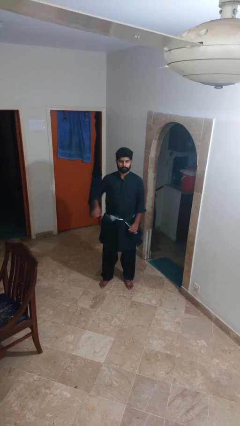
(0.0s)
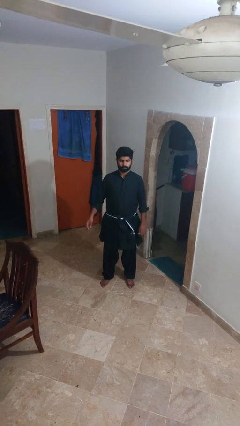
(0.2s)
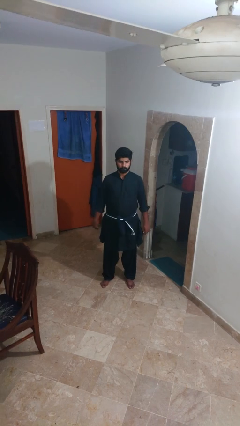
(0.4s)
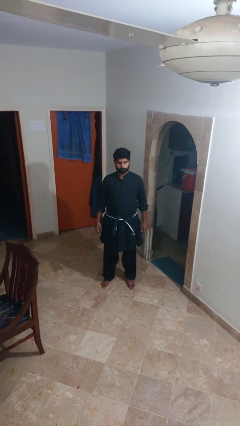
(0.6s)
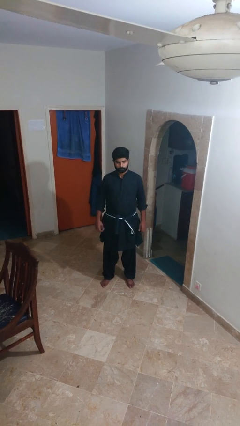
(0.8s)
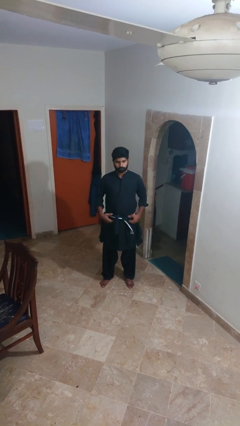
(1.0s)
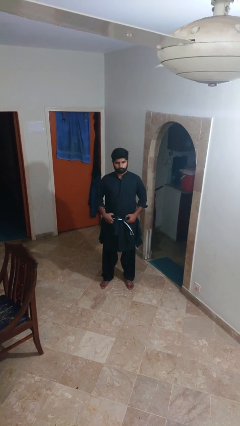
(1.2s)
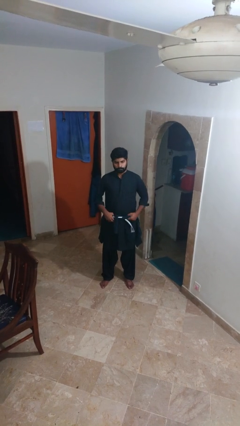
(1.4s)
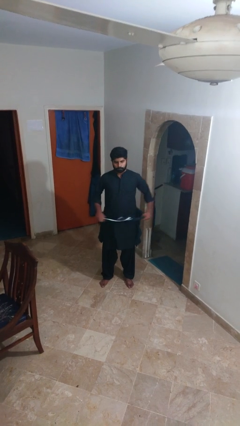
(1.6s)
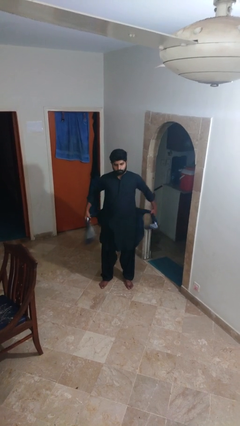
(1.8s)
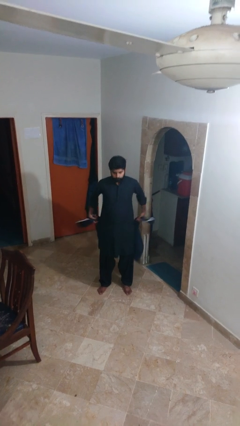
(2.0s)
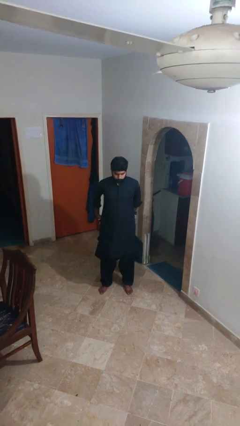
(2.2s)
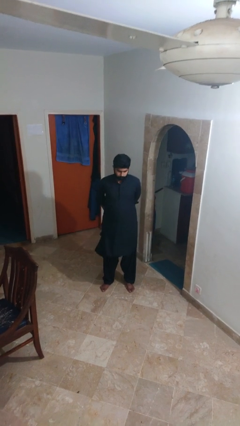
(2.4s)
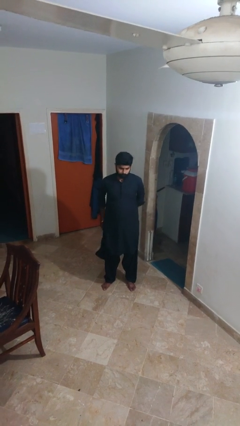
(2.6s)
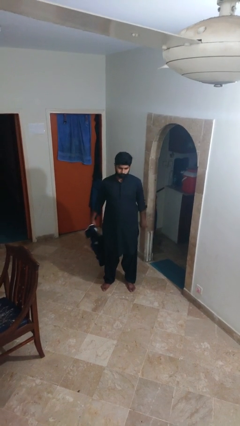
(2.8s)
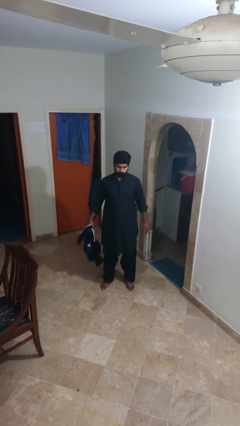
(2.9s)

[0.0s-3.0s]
person unties jacket around waist

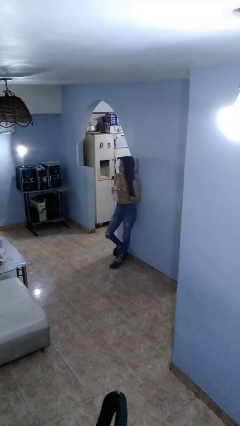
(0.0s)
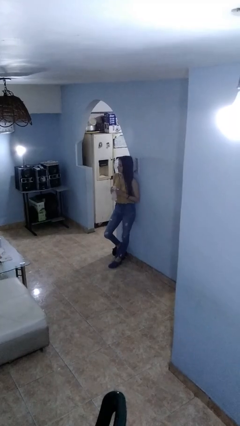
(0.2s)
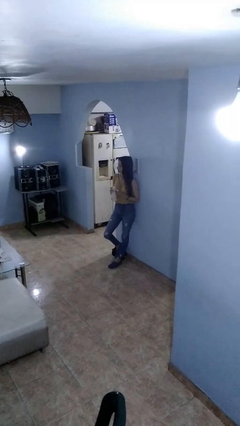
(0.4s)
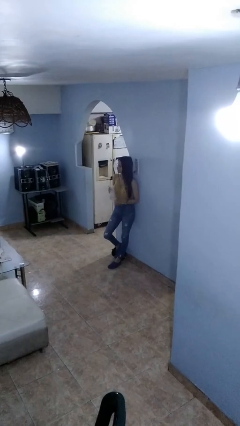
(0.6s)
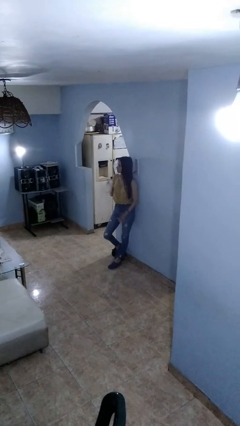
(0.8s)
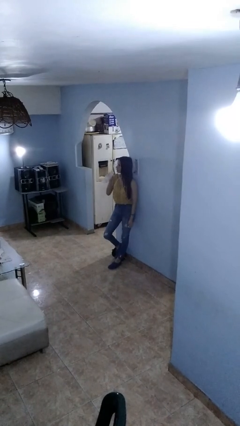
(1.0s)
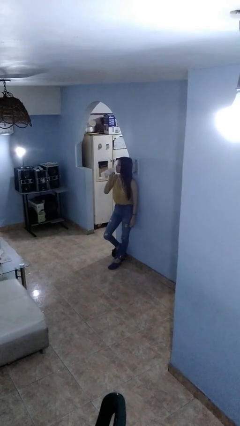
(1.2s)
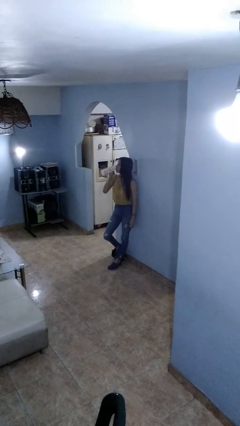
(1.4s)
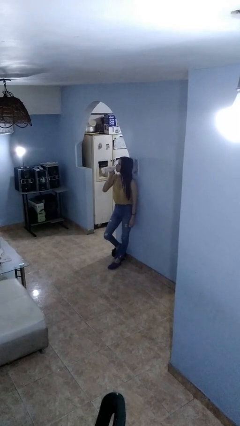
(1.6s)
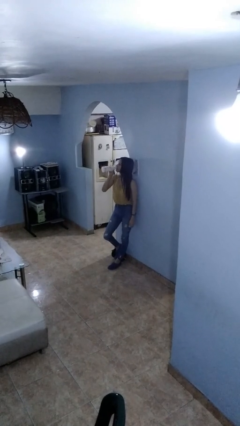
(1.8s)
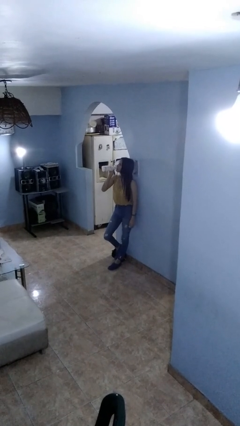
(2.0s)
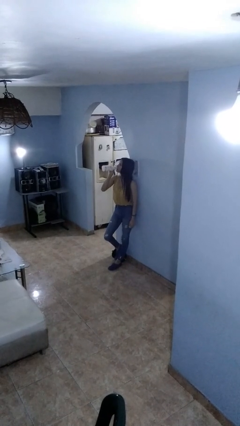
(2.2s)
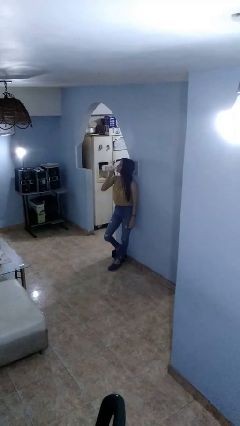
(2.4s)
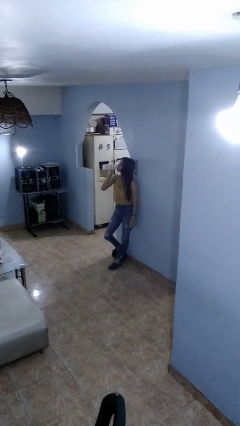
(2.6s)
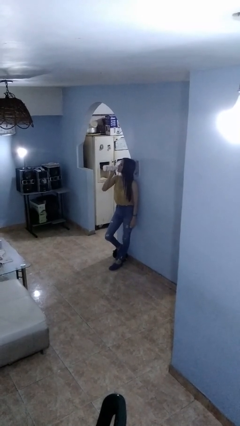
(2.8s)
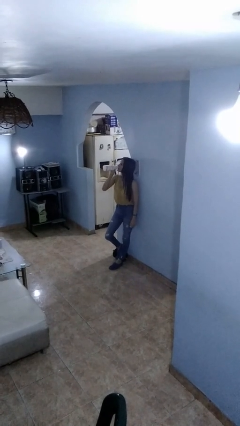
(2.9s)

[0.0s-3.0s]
person drinks from bottle

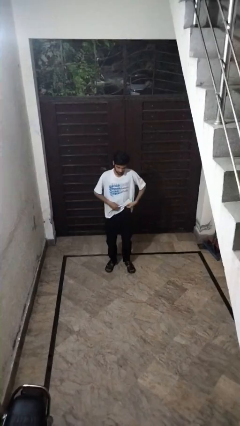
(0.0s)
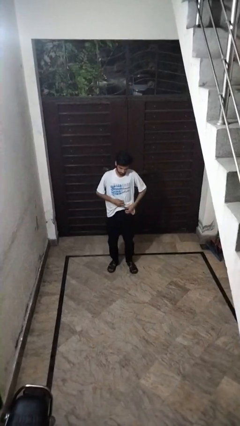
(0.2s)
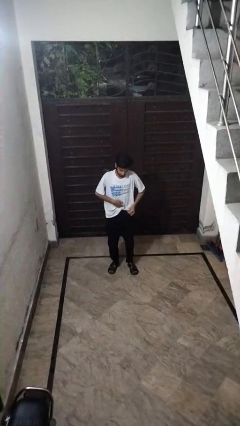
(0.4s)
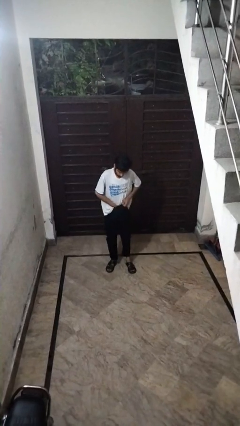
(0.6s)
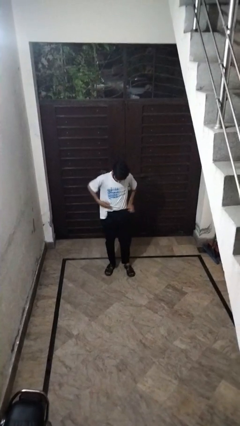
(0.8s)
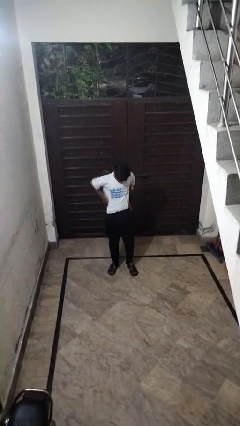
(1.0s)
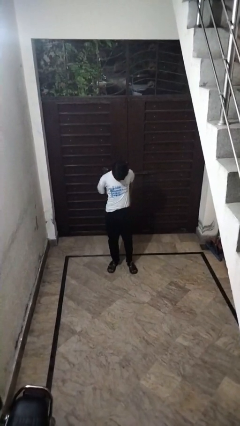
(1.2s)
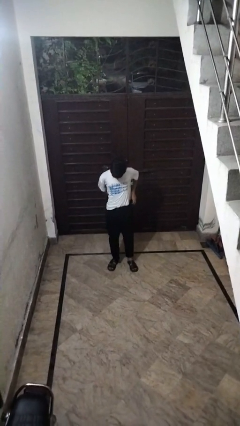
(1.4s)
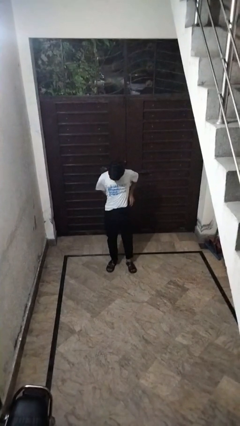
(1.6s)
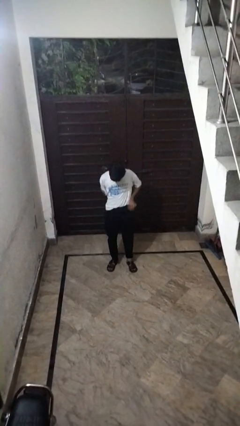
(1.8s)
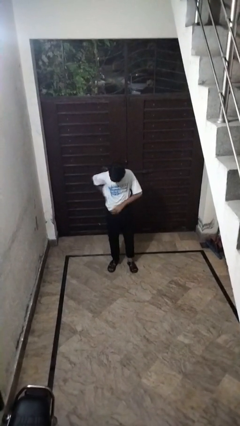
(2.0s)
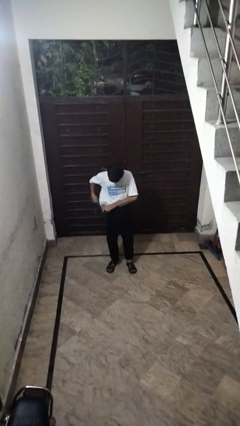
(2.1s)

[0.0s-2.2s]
person locks door with keys

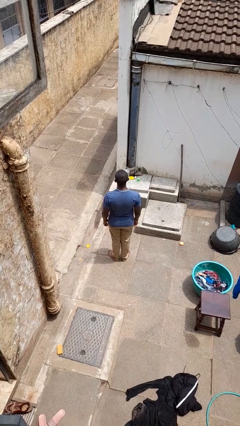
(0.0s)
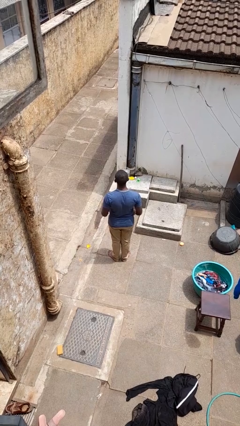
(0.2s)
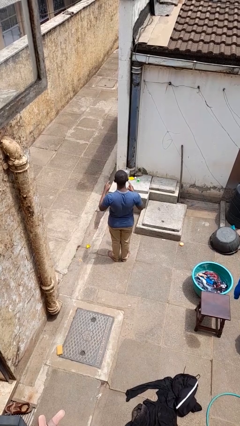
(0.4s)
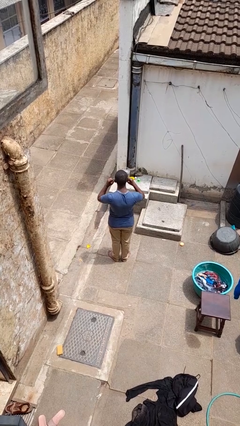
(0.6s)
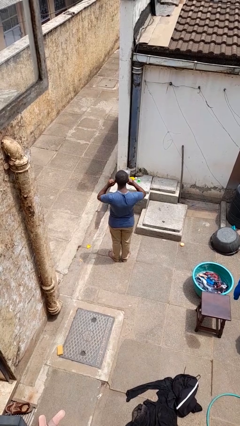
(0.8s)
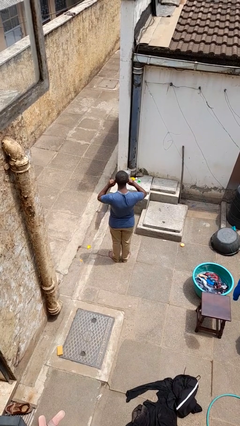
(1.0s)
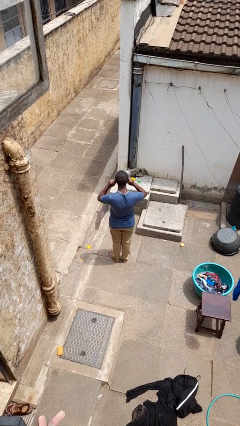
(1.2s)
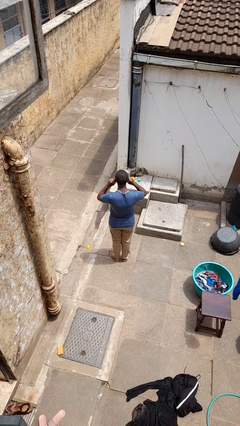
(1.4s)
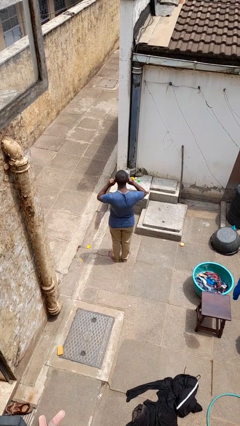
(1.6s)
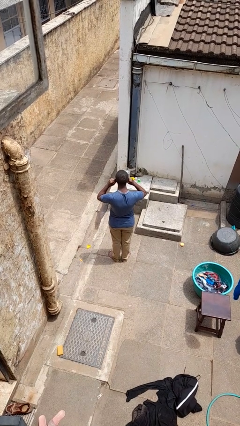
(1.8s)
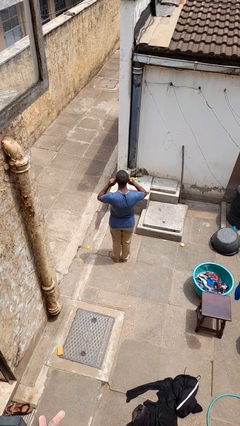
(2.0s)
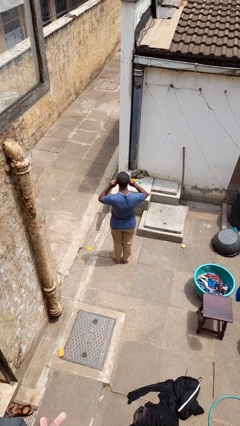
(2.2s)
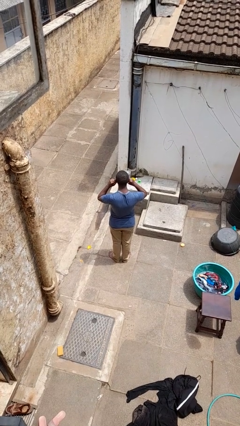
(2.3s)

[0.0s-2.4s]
person puts fingers in ear

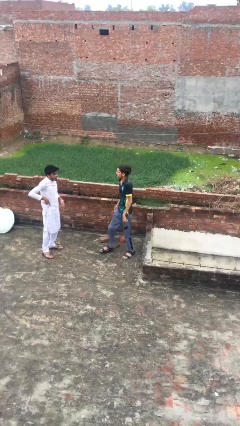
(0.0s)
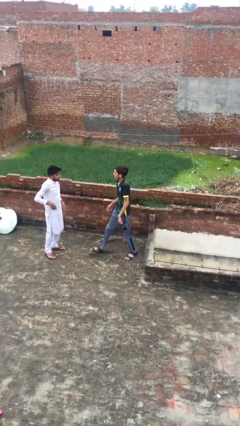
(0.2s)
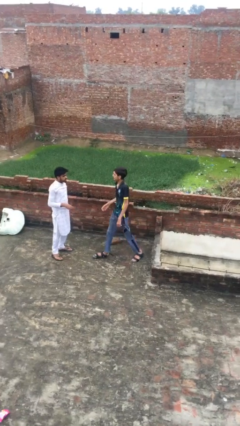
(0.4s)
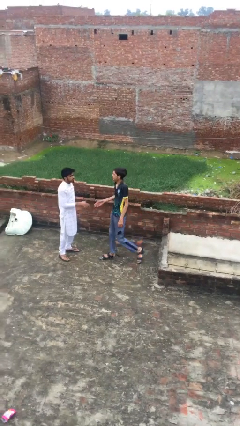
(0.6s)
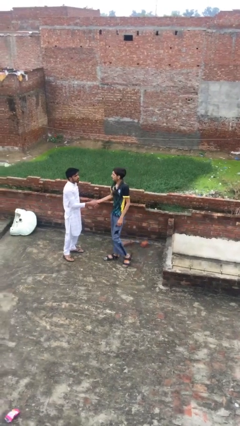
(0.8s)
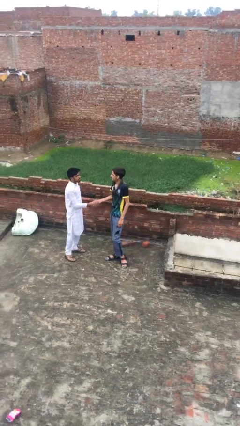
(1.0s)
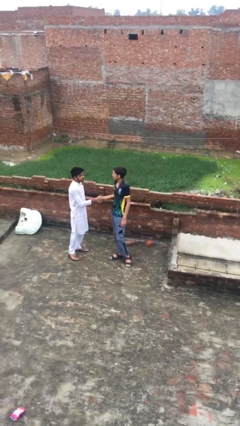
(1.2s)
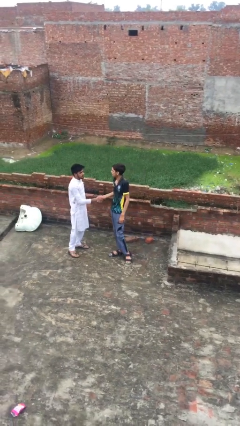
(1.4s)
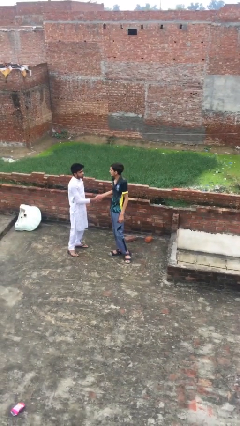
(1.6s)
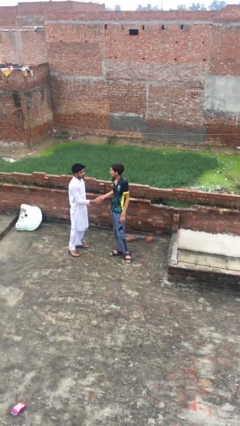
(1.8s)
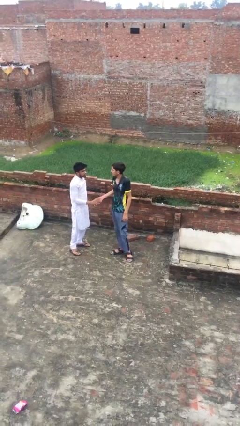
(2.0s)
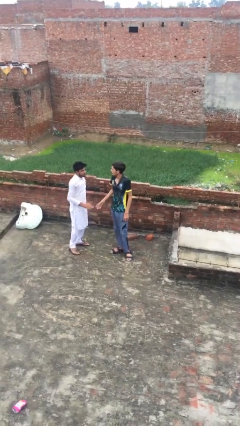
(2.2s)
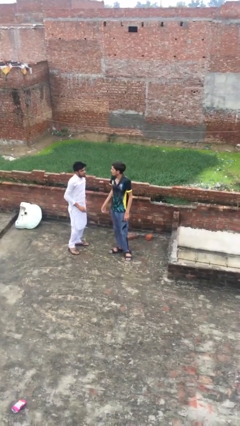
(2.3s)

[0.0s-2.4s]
person shakes hand

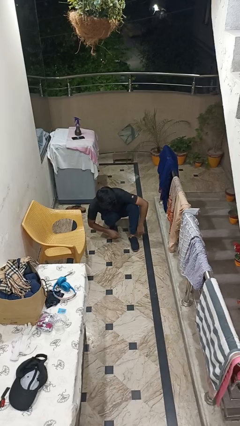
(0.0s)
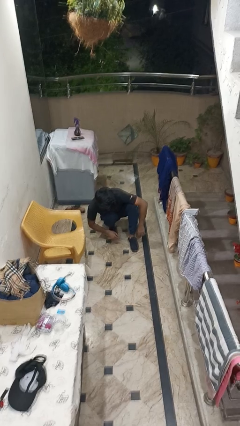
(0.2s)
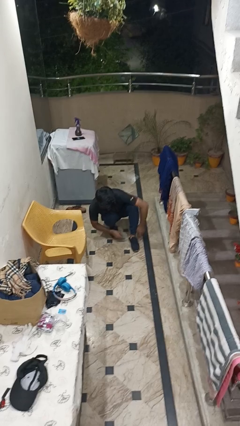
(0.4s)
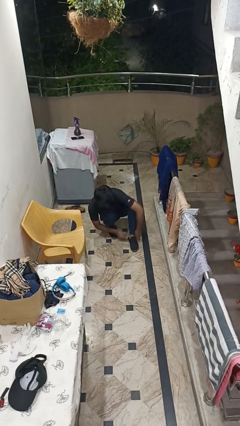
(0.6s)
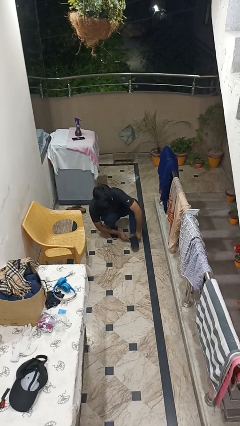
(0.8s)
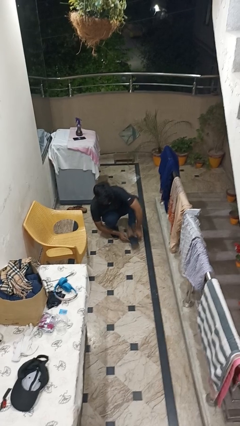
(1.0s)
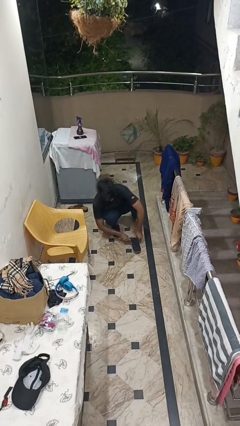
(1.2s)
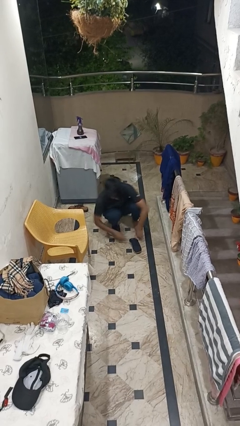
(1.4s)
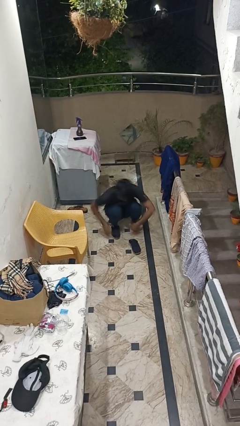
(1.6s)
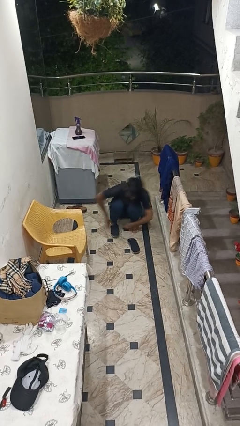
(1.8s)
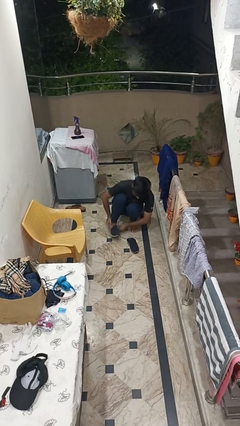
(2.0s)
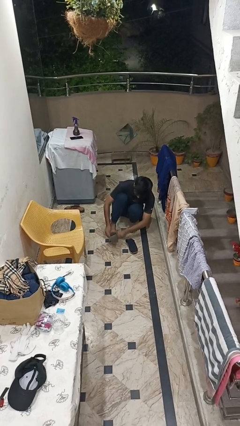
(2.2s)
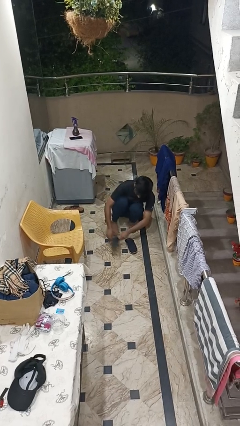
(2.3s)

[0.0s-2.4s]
person takes off shoes

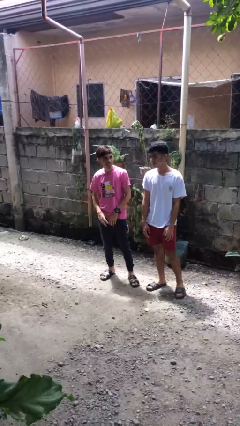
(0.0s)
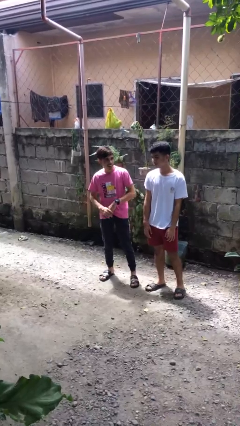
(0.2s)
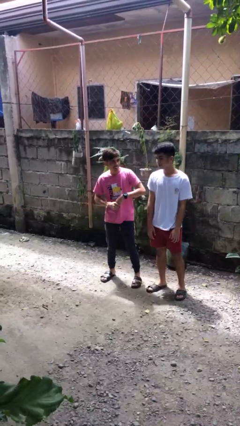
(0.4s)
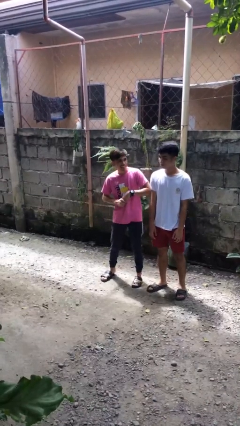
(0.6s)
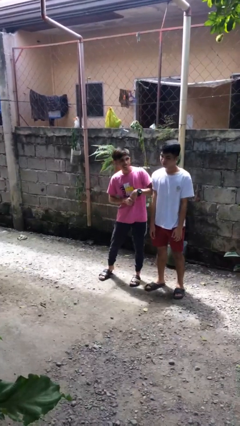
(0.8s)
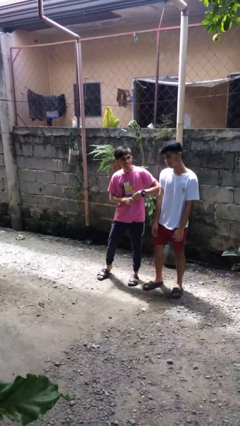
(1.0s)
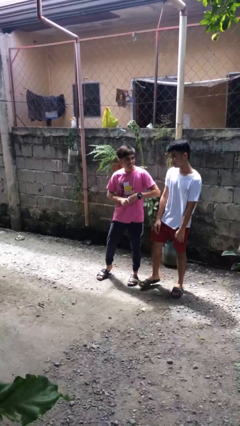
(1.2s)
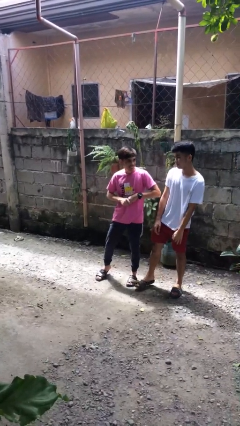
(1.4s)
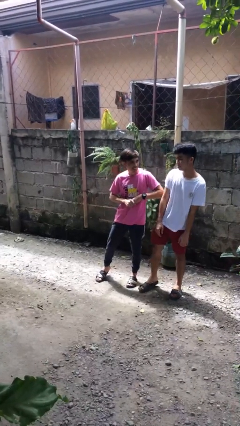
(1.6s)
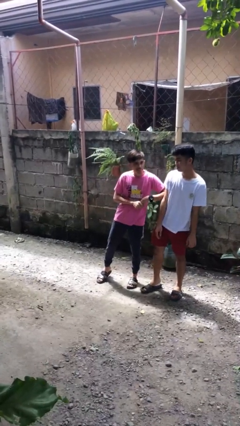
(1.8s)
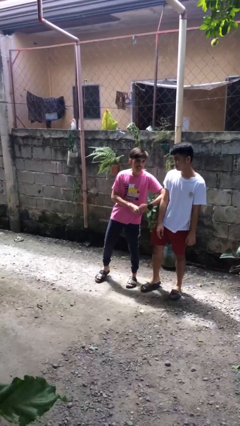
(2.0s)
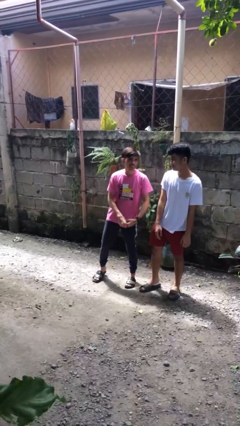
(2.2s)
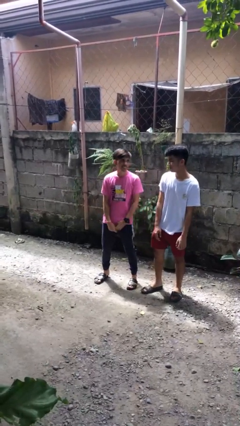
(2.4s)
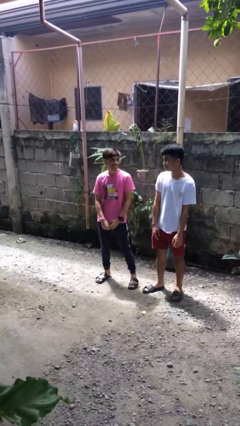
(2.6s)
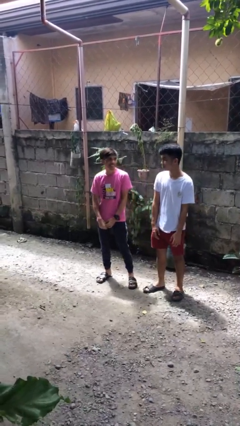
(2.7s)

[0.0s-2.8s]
person nudges person with elbow
